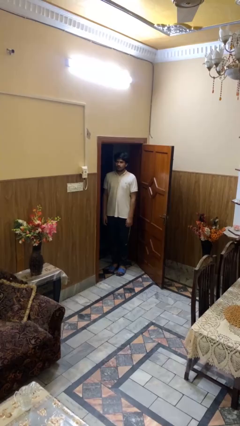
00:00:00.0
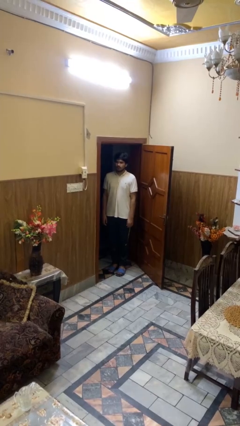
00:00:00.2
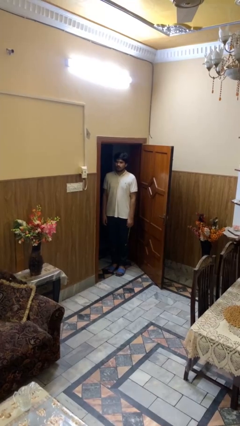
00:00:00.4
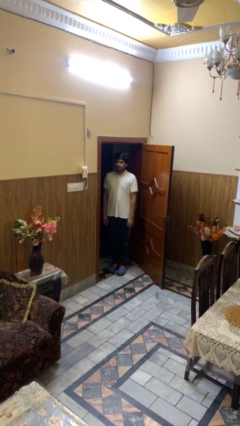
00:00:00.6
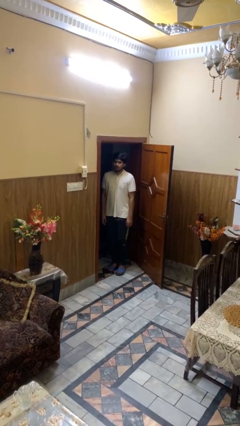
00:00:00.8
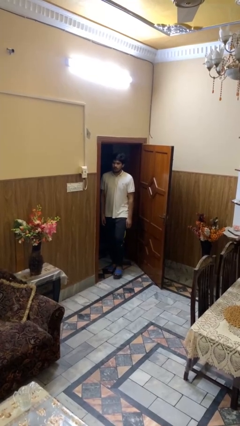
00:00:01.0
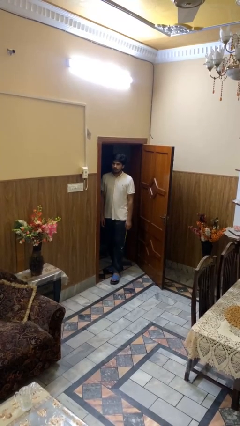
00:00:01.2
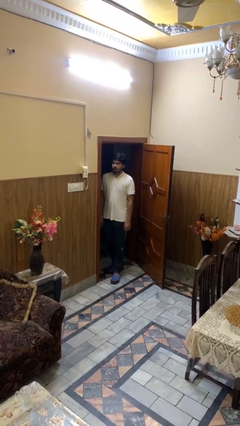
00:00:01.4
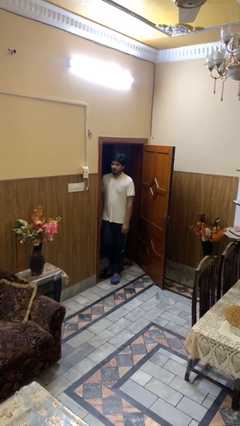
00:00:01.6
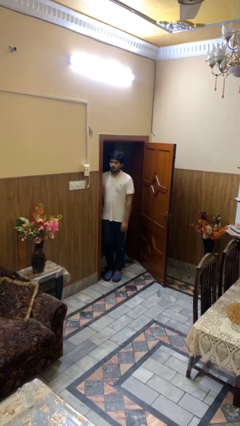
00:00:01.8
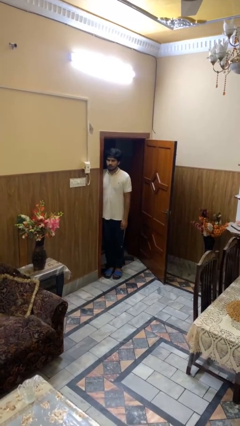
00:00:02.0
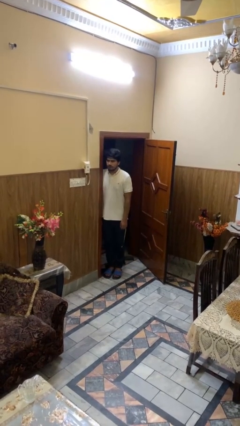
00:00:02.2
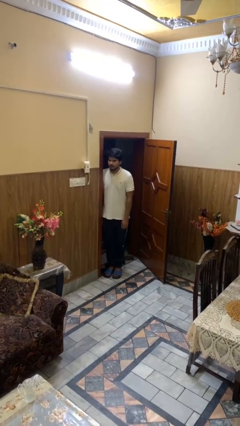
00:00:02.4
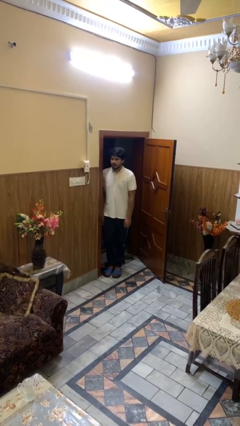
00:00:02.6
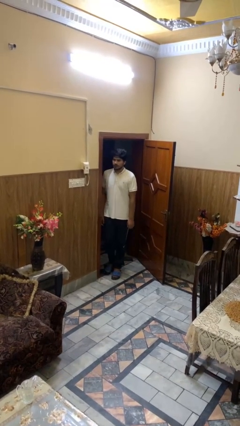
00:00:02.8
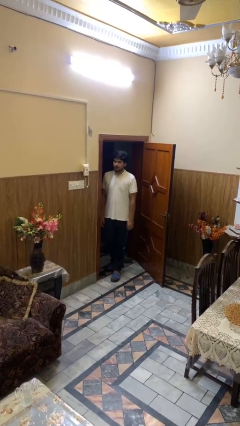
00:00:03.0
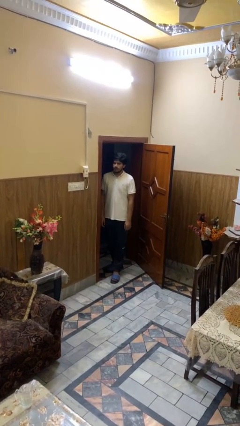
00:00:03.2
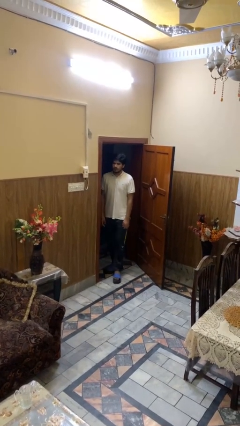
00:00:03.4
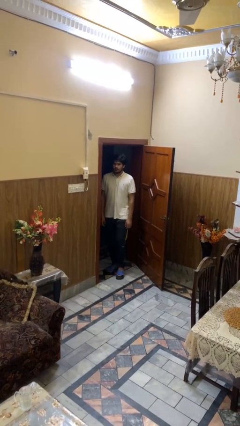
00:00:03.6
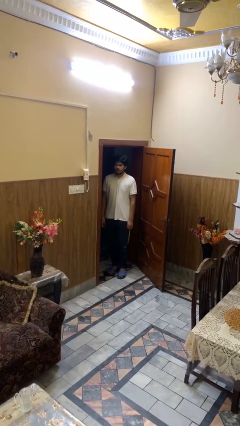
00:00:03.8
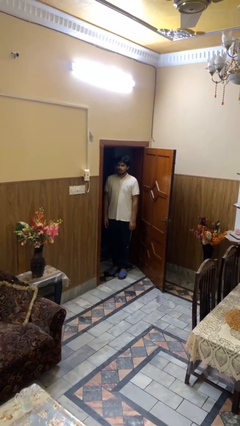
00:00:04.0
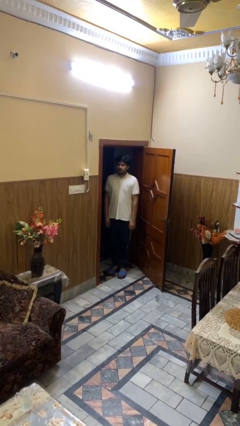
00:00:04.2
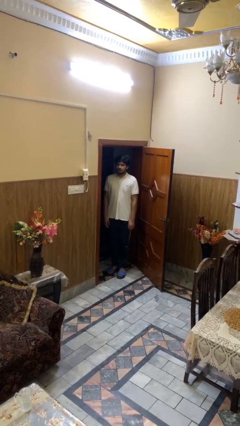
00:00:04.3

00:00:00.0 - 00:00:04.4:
person bumps into wall

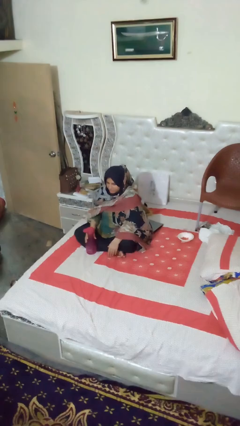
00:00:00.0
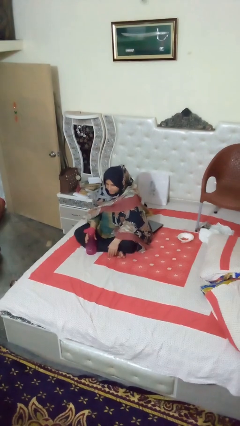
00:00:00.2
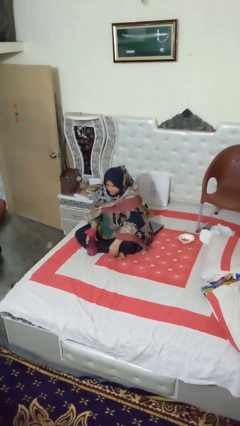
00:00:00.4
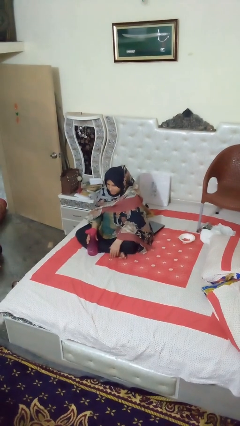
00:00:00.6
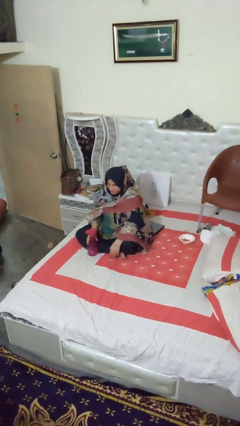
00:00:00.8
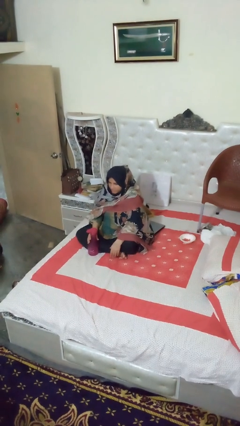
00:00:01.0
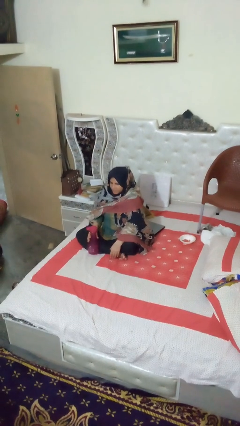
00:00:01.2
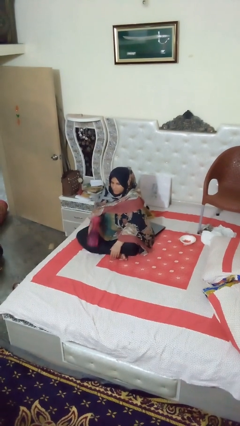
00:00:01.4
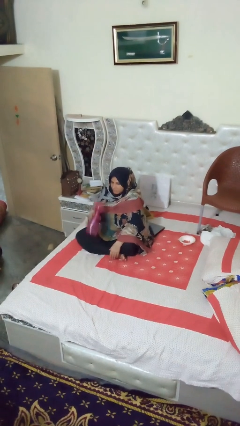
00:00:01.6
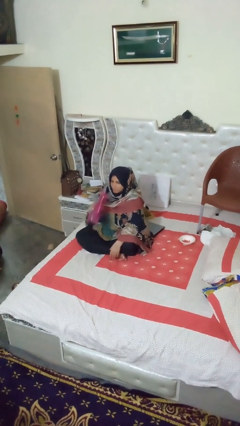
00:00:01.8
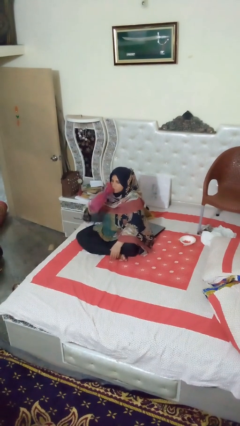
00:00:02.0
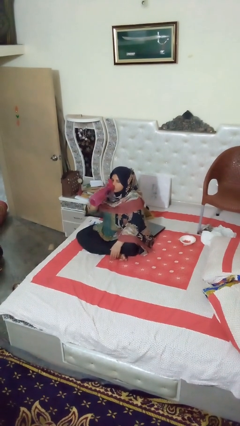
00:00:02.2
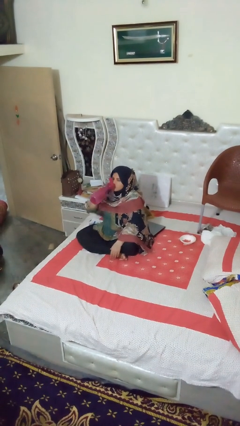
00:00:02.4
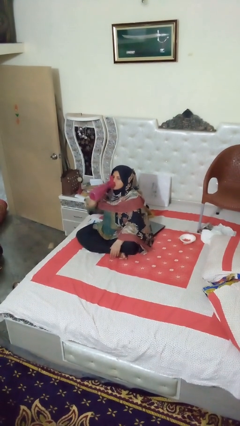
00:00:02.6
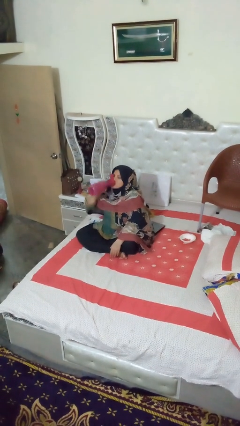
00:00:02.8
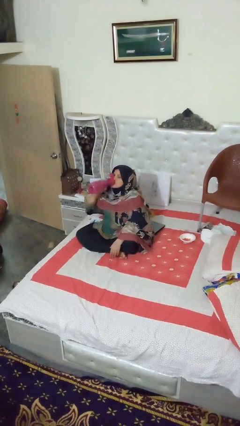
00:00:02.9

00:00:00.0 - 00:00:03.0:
person drinks from bottle

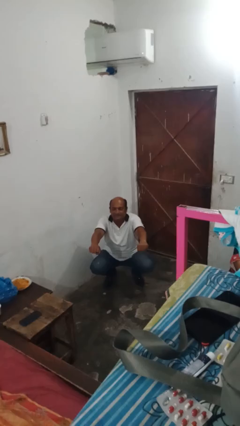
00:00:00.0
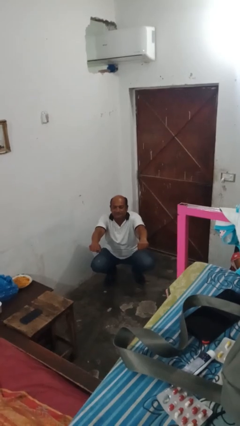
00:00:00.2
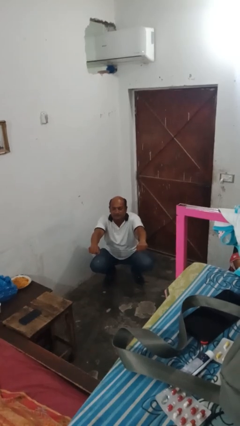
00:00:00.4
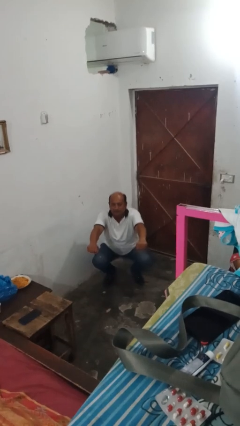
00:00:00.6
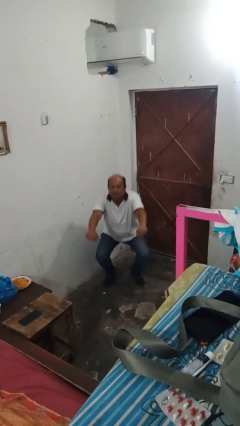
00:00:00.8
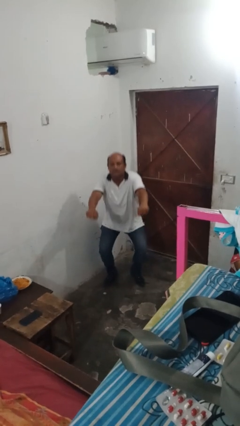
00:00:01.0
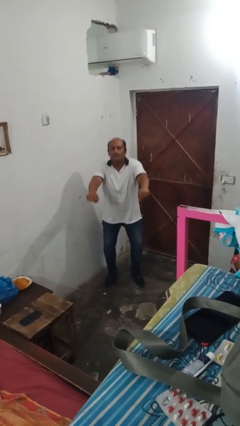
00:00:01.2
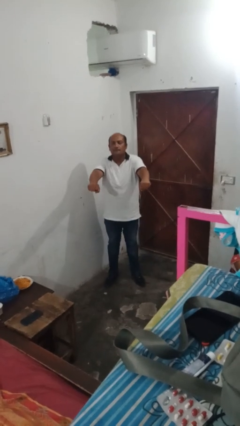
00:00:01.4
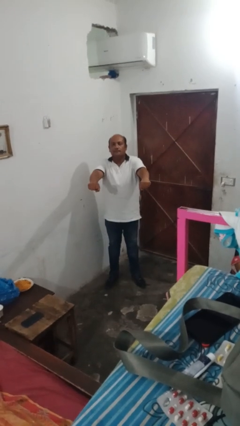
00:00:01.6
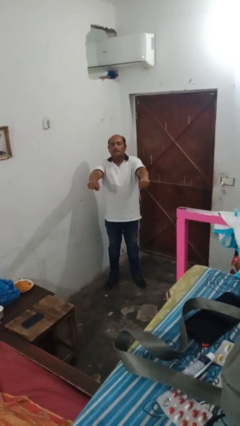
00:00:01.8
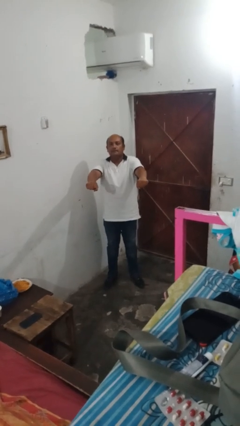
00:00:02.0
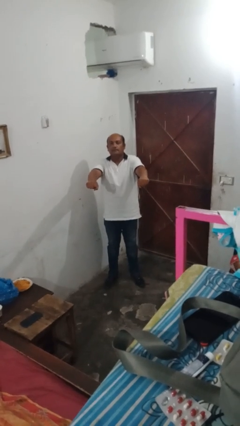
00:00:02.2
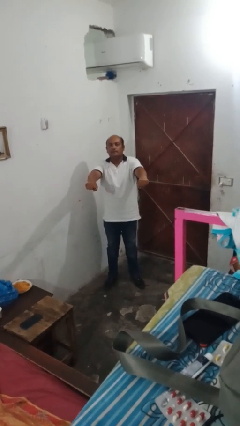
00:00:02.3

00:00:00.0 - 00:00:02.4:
person stands up

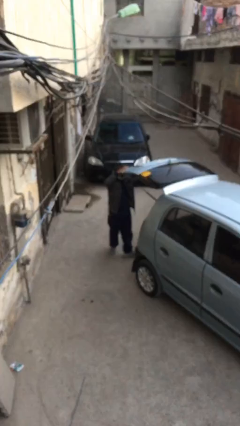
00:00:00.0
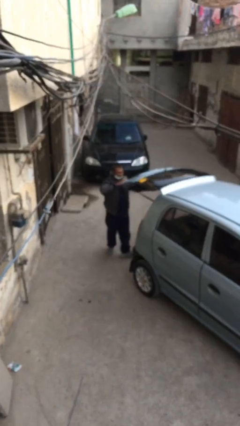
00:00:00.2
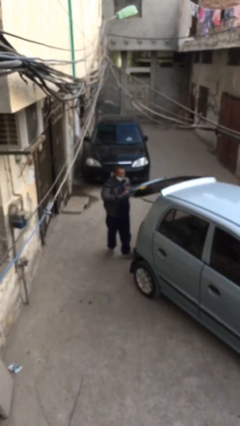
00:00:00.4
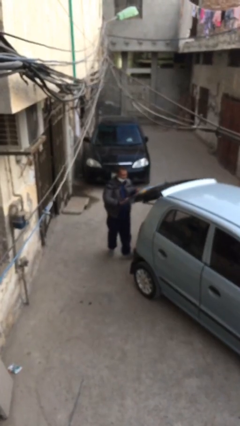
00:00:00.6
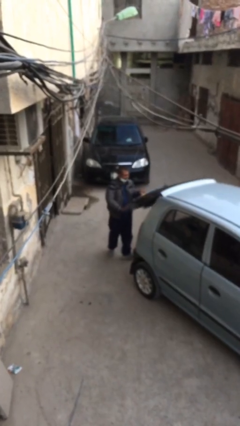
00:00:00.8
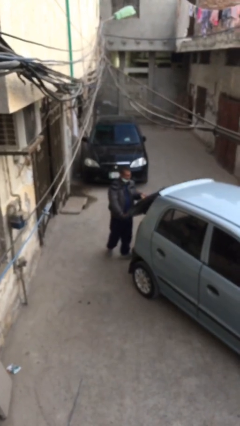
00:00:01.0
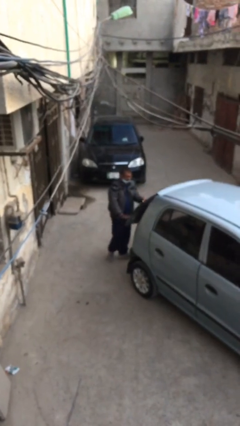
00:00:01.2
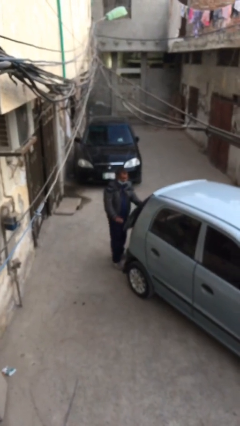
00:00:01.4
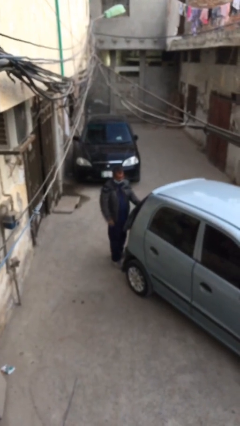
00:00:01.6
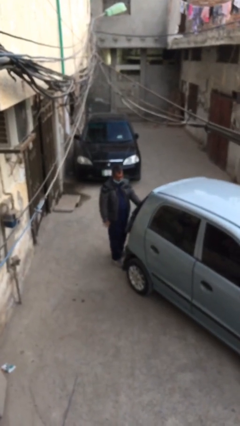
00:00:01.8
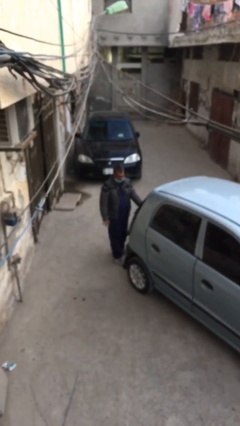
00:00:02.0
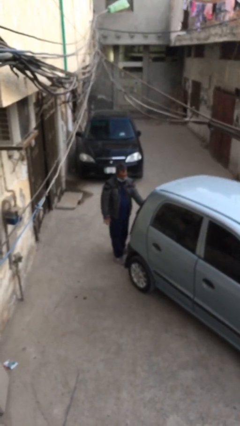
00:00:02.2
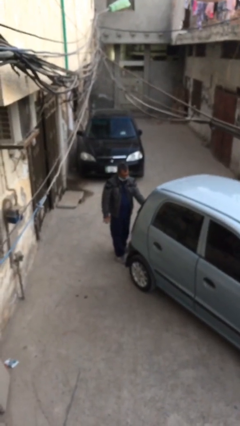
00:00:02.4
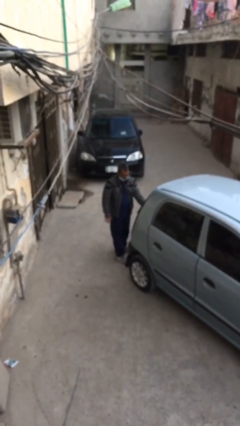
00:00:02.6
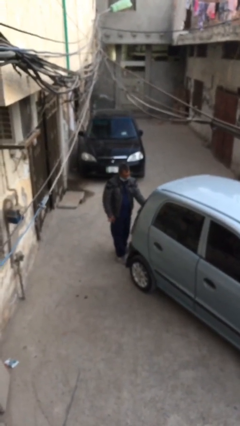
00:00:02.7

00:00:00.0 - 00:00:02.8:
person closes car trunk

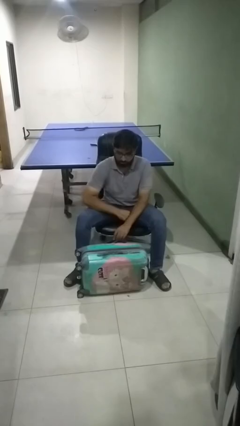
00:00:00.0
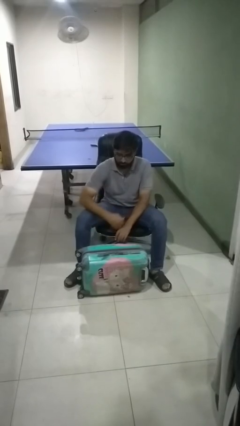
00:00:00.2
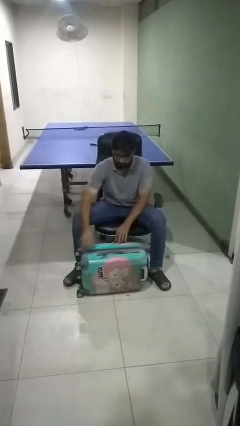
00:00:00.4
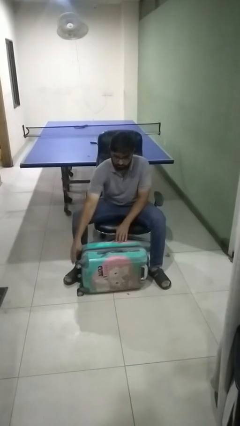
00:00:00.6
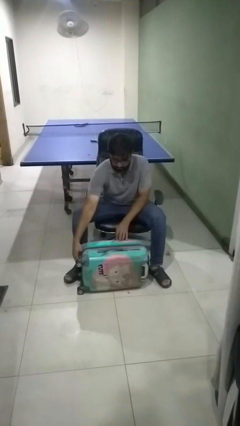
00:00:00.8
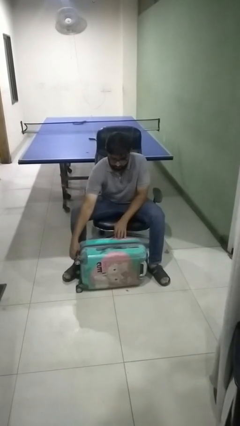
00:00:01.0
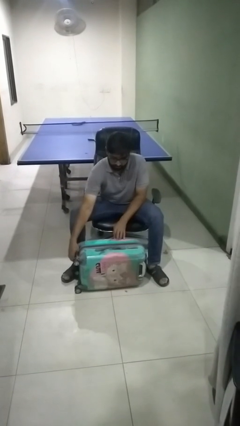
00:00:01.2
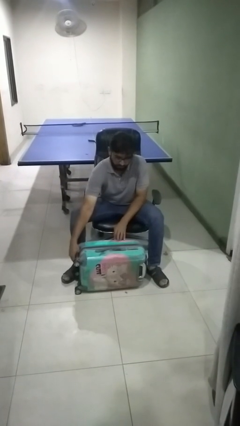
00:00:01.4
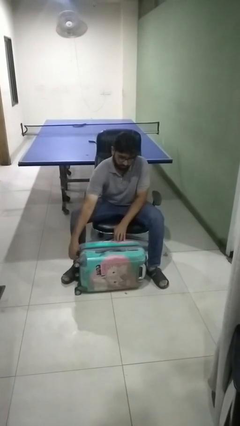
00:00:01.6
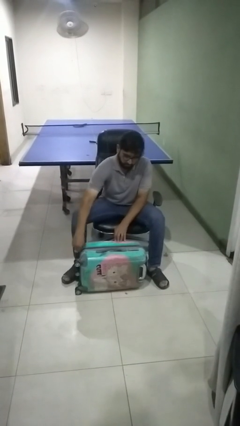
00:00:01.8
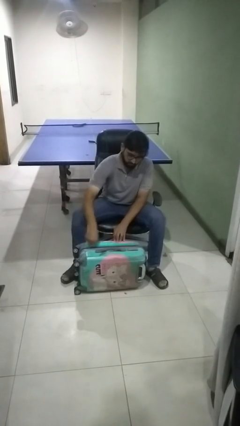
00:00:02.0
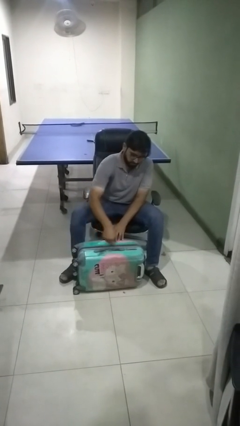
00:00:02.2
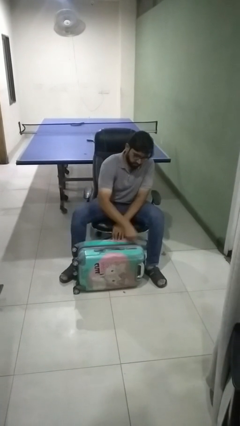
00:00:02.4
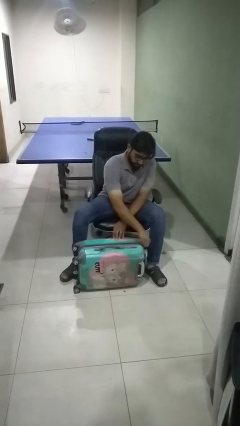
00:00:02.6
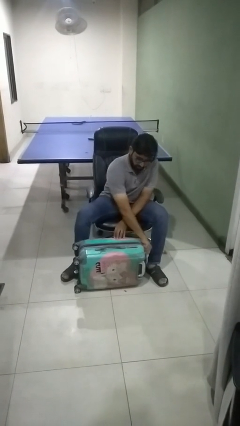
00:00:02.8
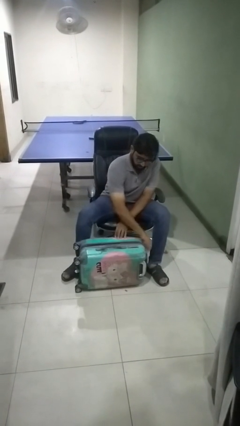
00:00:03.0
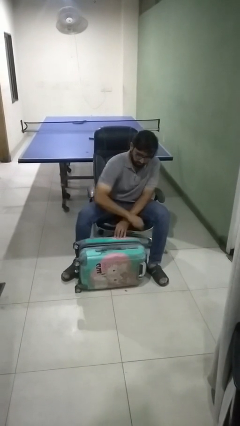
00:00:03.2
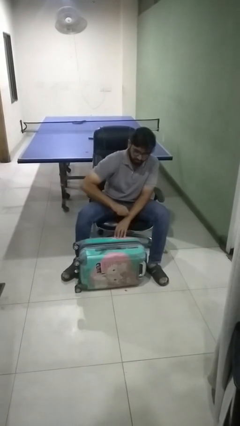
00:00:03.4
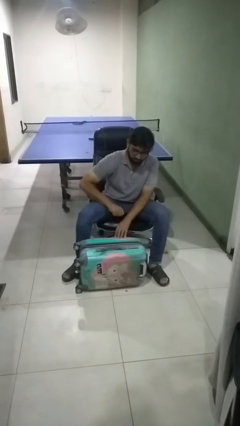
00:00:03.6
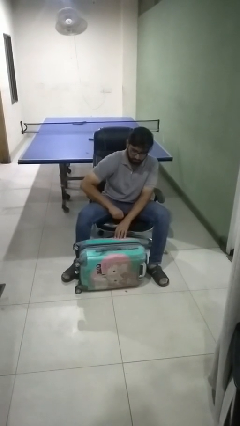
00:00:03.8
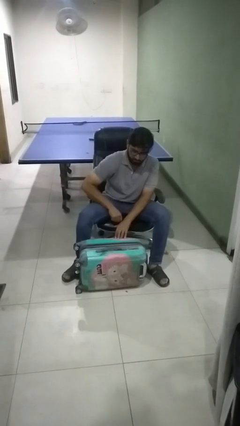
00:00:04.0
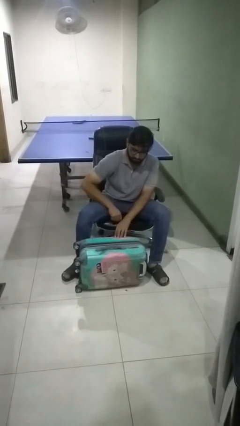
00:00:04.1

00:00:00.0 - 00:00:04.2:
person opens suitcase

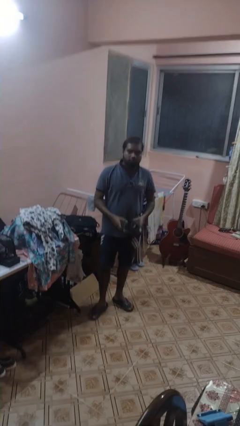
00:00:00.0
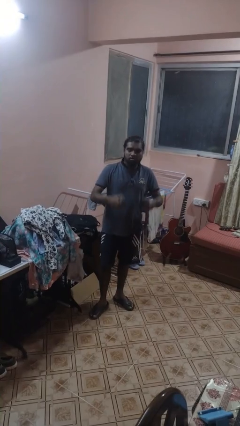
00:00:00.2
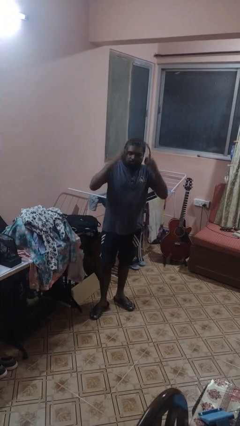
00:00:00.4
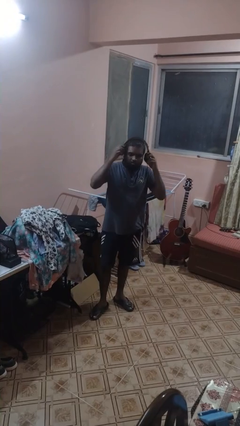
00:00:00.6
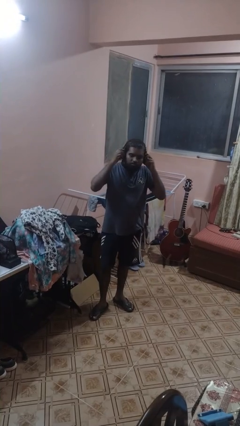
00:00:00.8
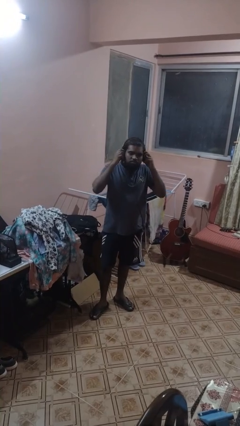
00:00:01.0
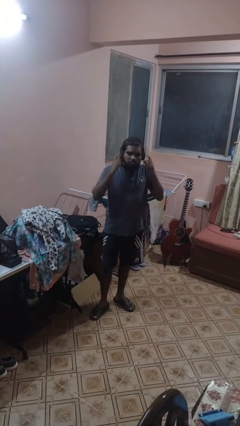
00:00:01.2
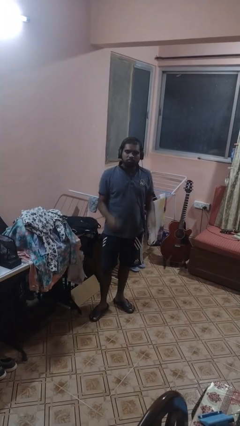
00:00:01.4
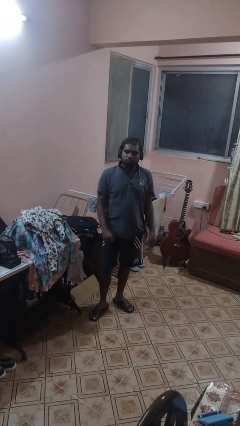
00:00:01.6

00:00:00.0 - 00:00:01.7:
person puts on headphones
